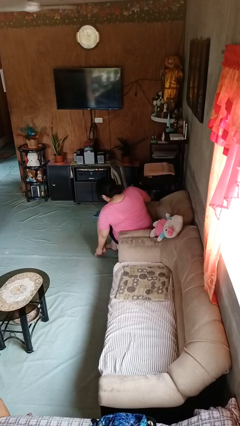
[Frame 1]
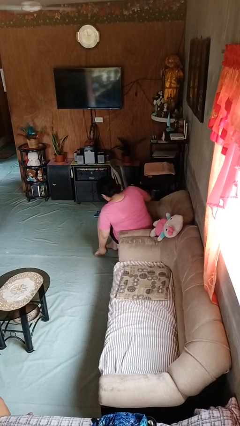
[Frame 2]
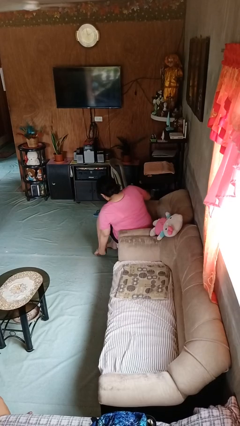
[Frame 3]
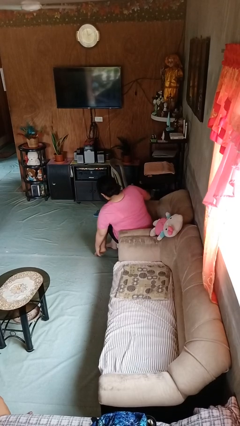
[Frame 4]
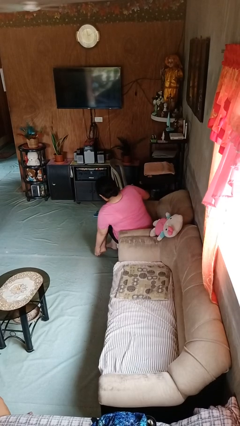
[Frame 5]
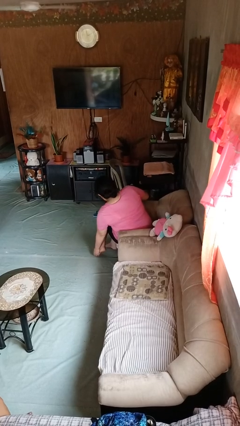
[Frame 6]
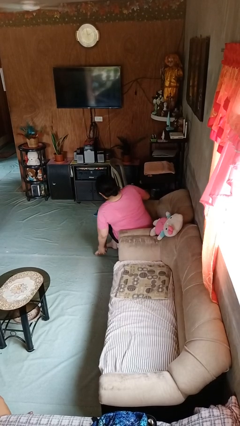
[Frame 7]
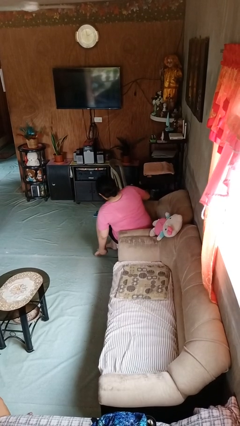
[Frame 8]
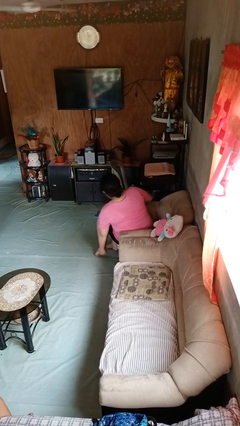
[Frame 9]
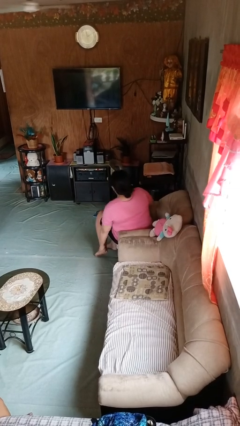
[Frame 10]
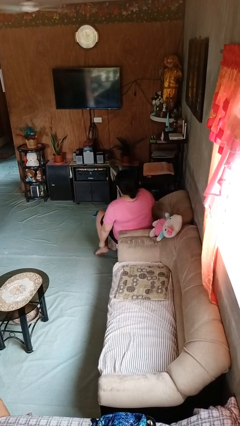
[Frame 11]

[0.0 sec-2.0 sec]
person rubs foot

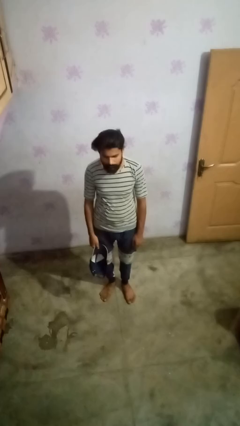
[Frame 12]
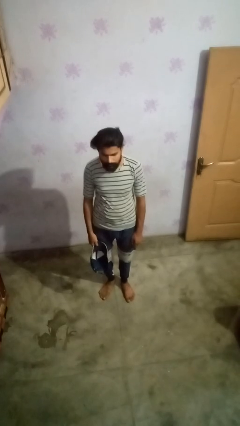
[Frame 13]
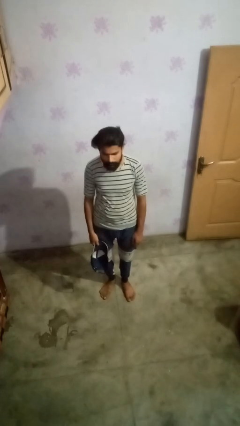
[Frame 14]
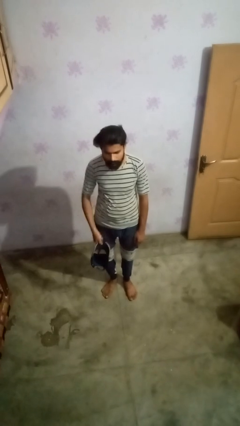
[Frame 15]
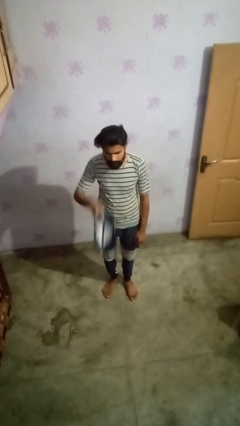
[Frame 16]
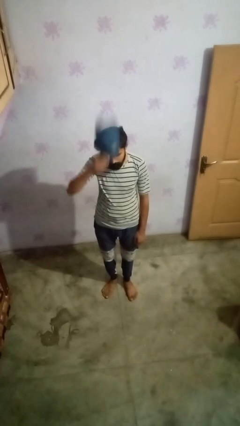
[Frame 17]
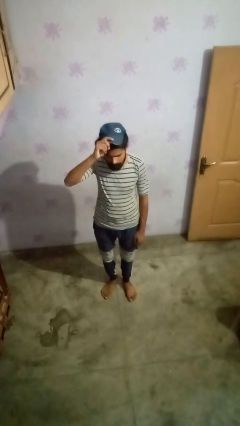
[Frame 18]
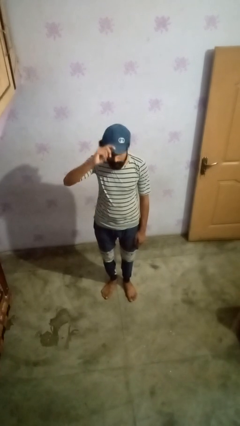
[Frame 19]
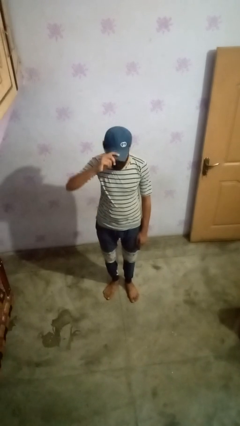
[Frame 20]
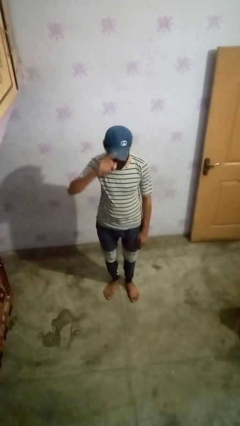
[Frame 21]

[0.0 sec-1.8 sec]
person puts on hat

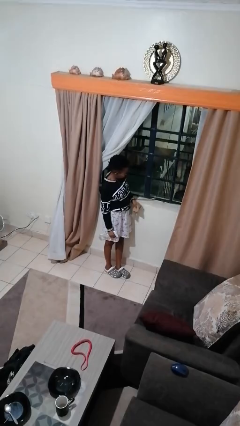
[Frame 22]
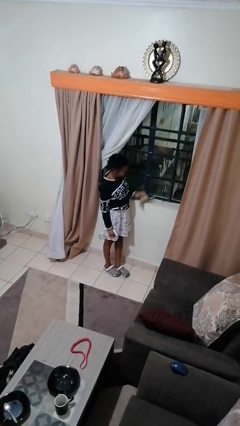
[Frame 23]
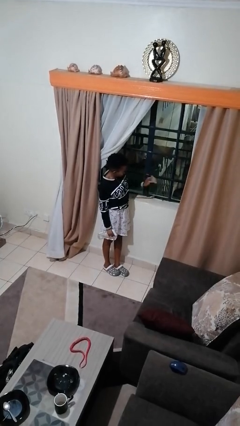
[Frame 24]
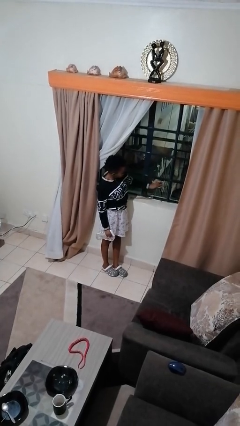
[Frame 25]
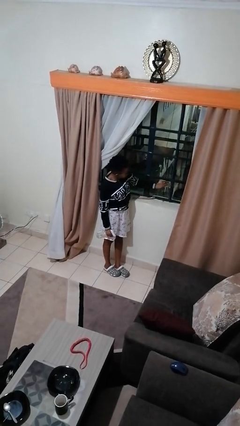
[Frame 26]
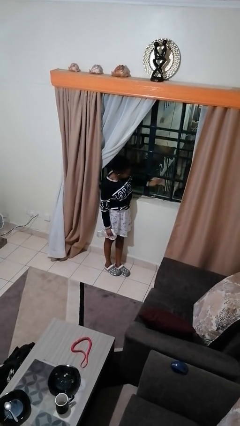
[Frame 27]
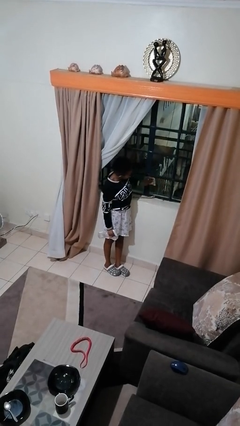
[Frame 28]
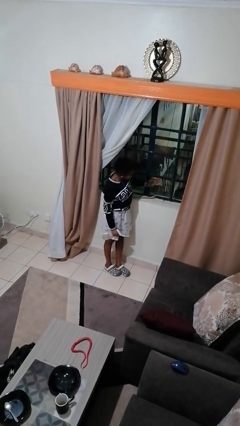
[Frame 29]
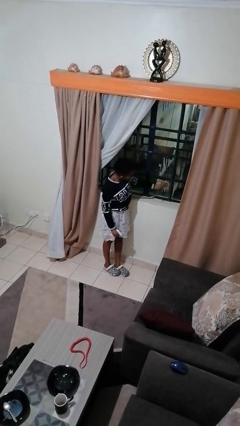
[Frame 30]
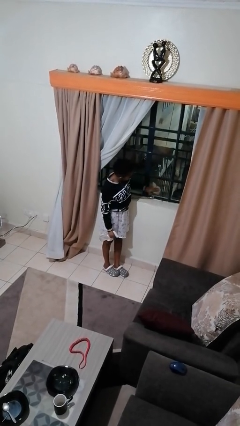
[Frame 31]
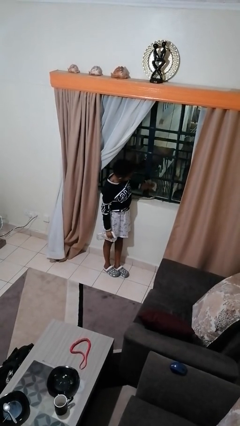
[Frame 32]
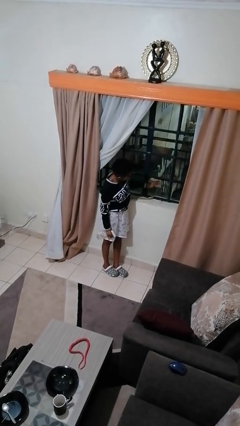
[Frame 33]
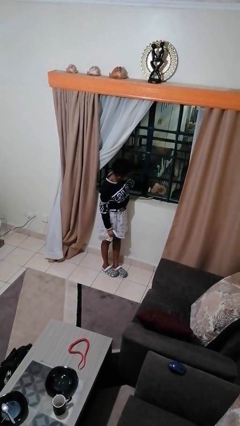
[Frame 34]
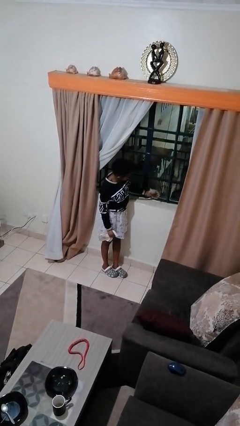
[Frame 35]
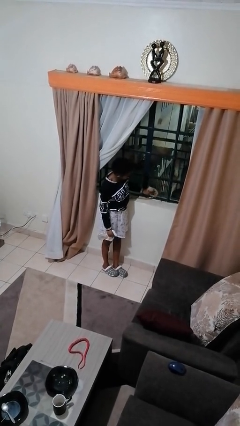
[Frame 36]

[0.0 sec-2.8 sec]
person washes window

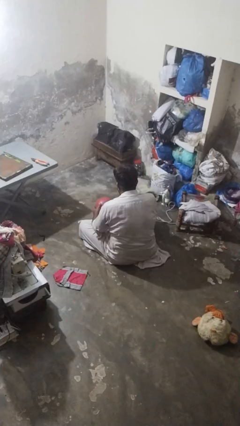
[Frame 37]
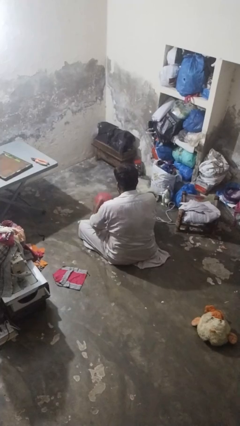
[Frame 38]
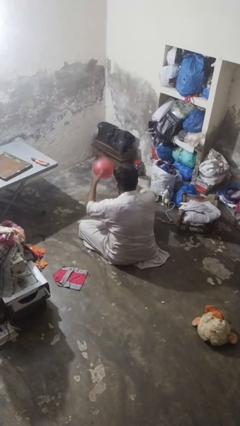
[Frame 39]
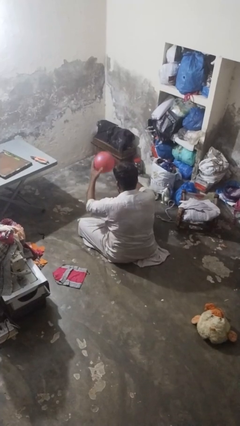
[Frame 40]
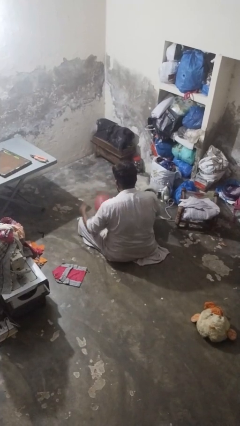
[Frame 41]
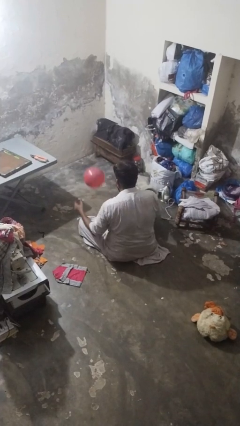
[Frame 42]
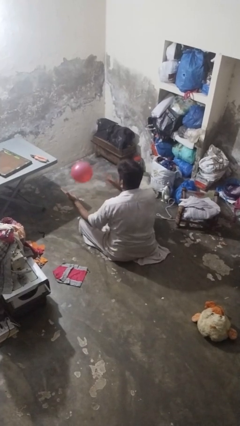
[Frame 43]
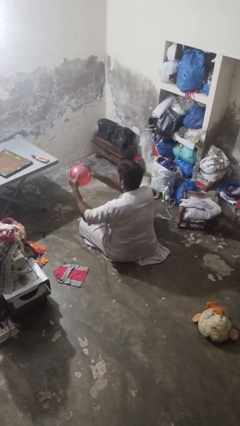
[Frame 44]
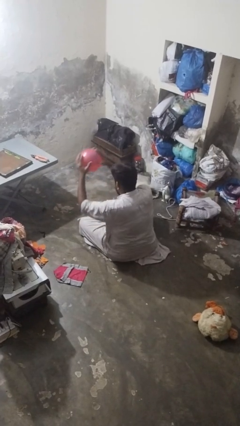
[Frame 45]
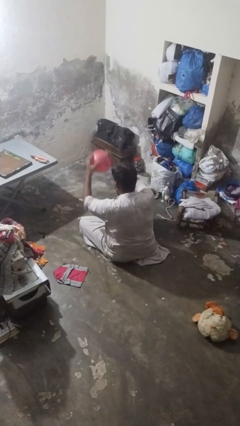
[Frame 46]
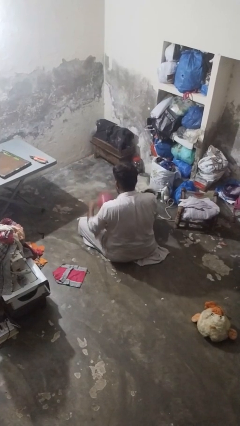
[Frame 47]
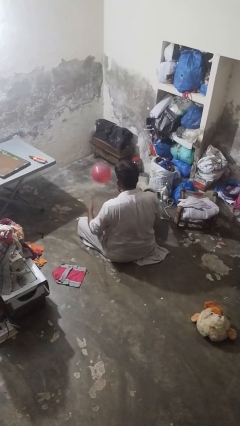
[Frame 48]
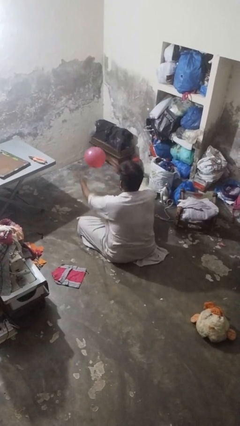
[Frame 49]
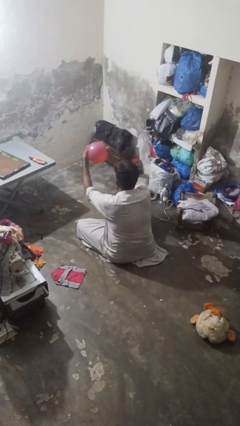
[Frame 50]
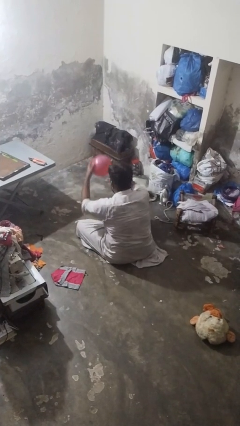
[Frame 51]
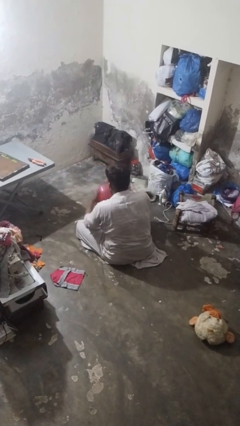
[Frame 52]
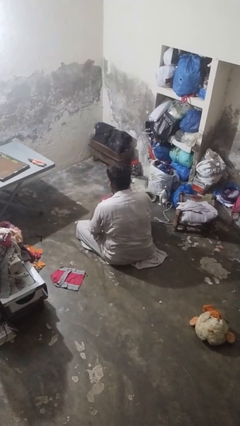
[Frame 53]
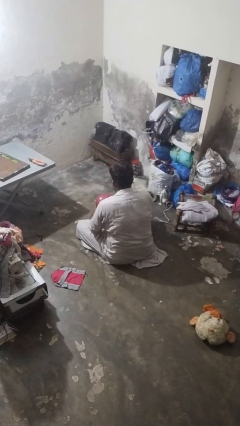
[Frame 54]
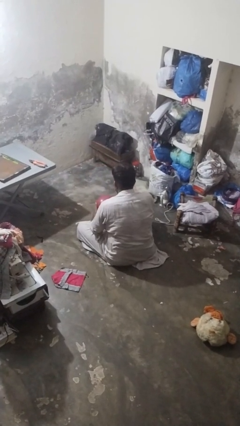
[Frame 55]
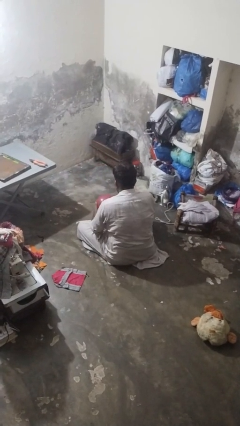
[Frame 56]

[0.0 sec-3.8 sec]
person bounces ball on floor

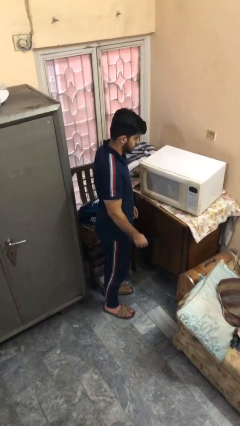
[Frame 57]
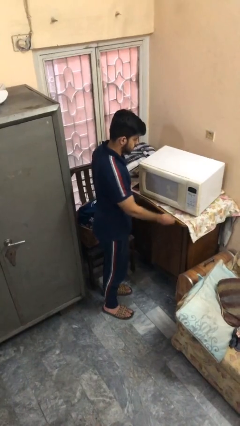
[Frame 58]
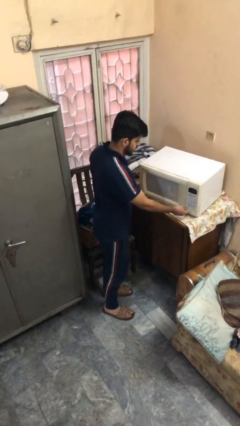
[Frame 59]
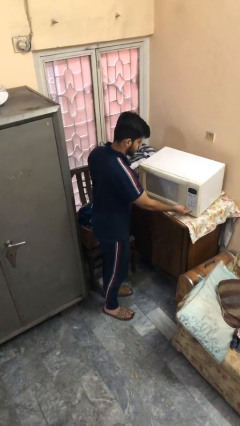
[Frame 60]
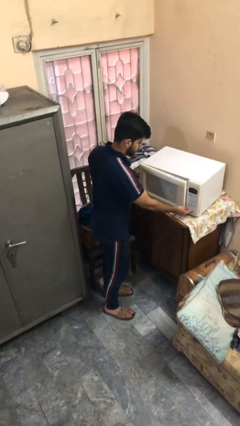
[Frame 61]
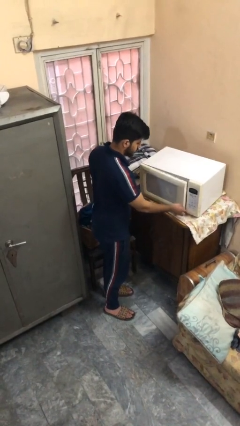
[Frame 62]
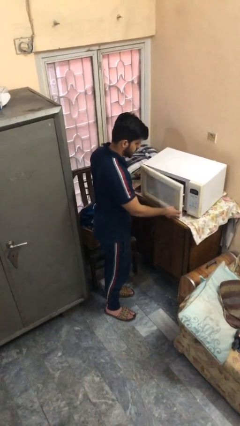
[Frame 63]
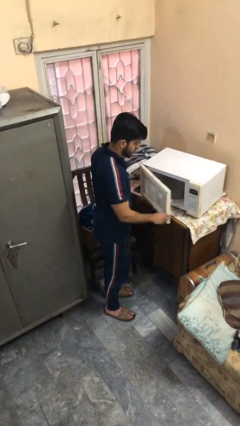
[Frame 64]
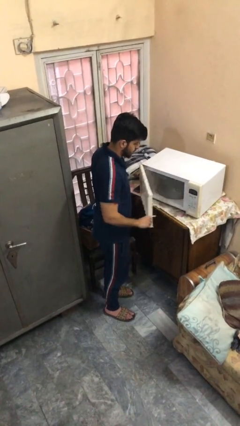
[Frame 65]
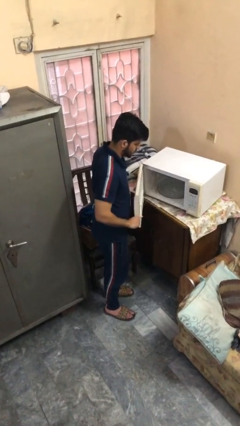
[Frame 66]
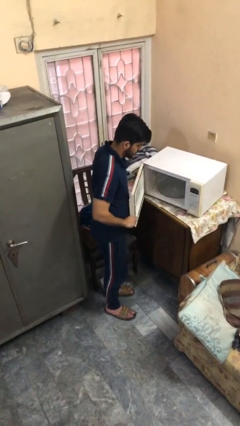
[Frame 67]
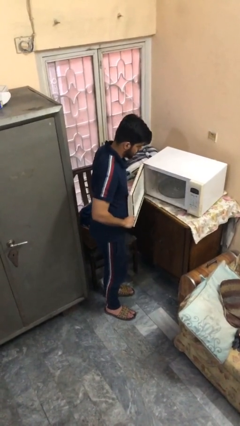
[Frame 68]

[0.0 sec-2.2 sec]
person opens microwave

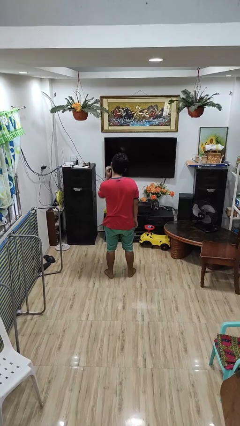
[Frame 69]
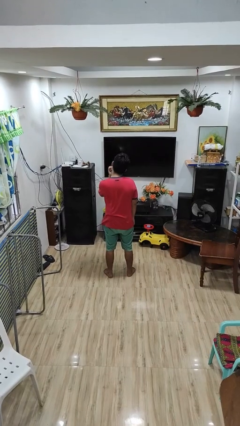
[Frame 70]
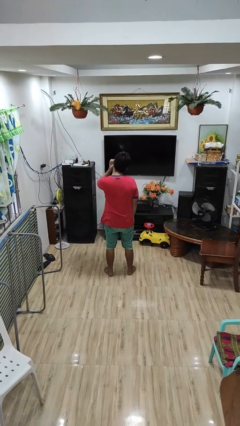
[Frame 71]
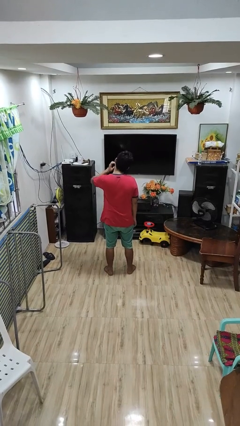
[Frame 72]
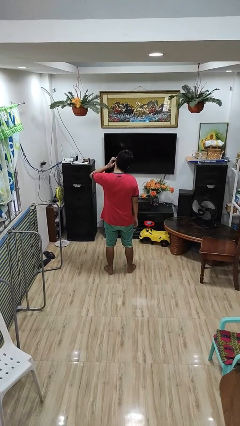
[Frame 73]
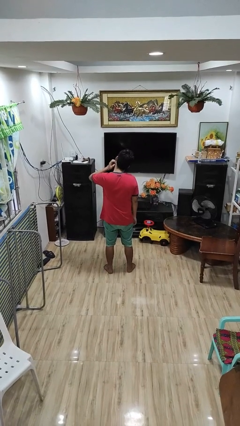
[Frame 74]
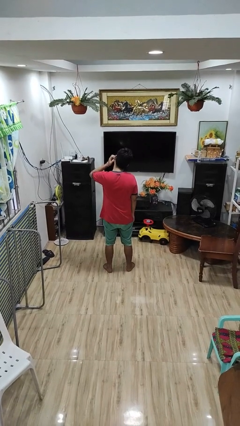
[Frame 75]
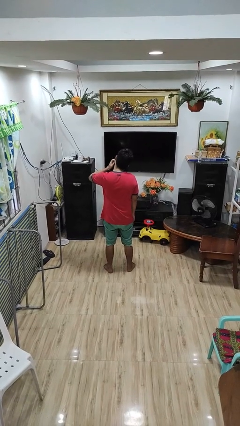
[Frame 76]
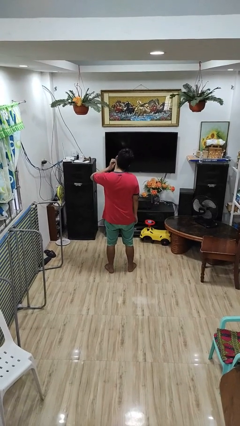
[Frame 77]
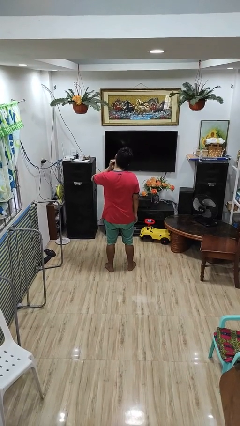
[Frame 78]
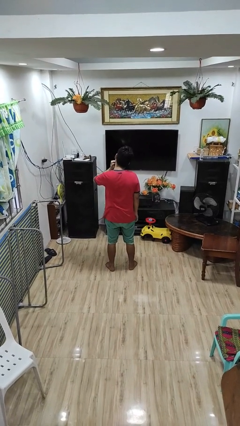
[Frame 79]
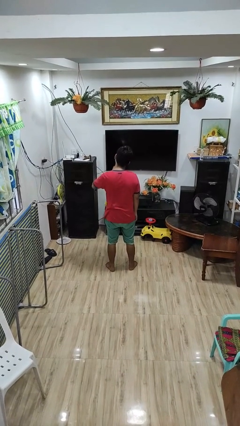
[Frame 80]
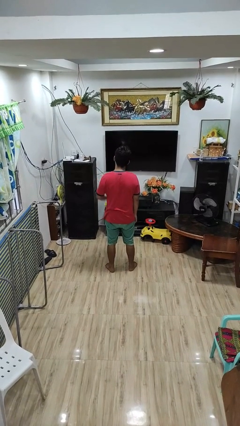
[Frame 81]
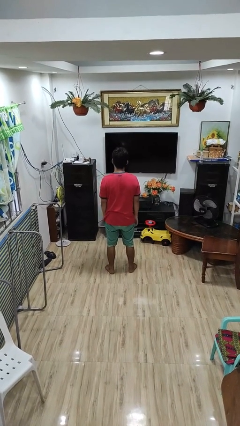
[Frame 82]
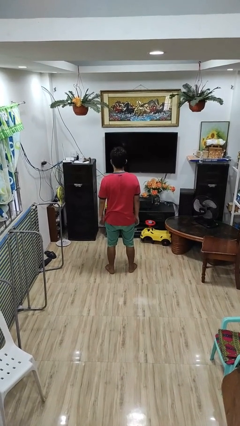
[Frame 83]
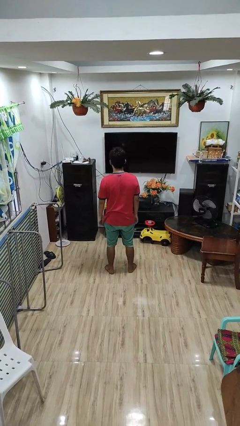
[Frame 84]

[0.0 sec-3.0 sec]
person scratches face

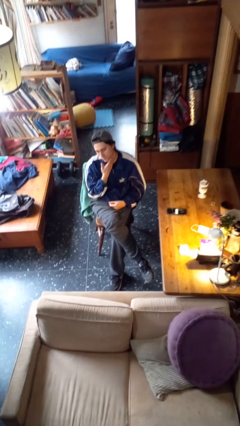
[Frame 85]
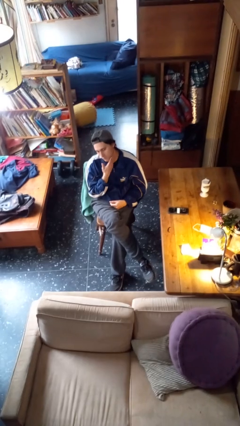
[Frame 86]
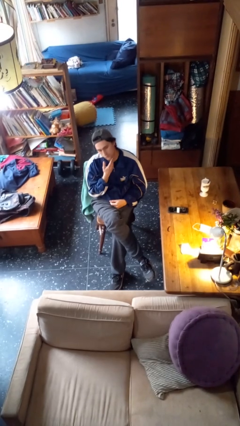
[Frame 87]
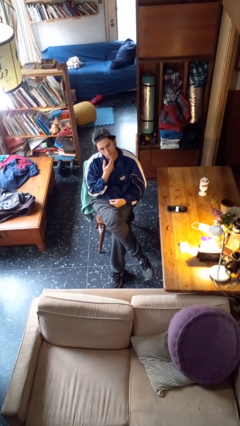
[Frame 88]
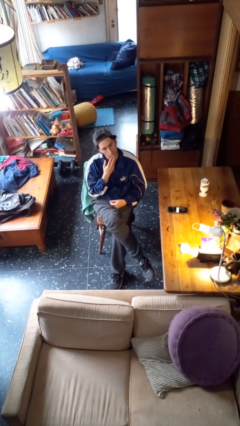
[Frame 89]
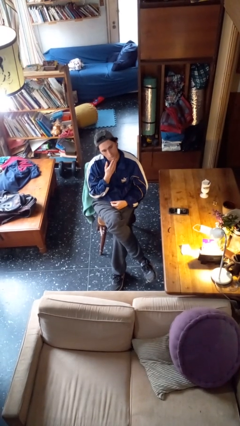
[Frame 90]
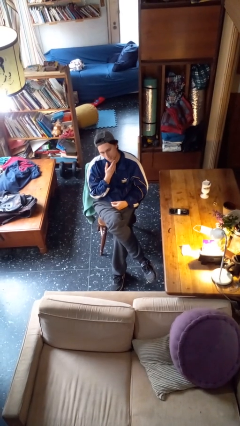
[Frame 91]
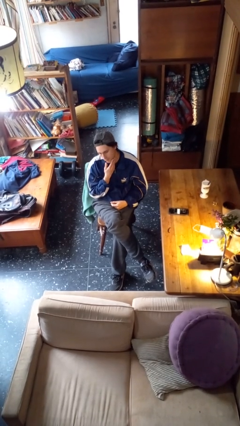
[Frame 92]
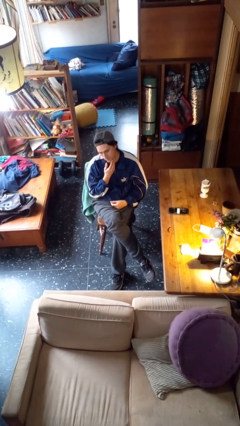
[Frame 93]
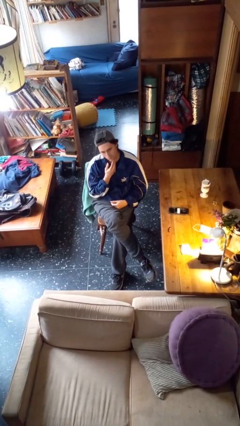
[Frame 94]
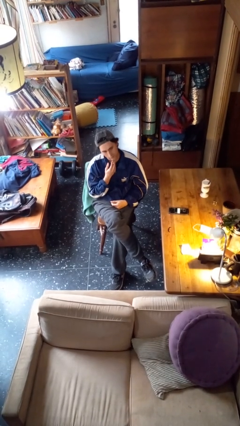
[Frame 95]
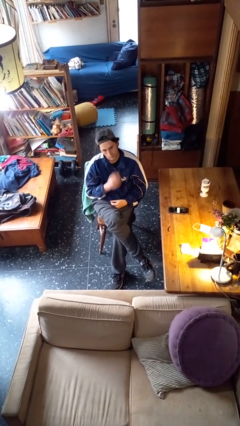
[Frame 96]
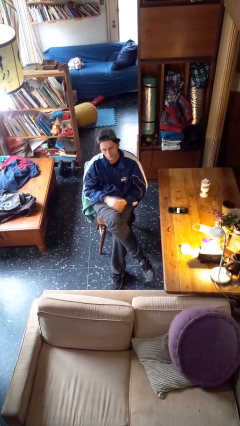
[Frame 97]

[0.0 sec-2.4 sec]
person strokes chin
